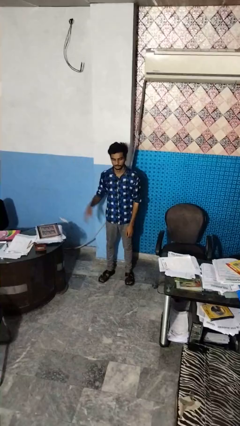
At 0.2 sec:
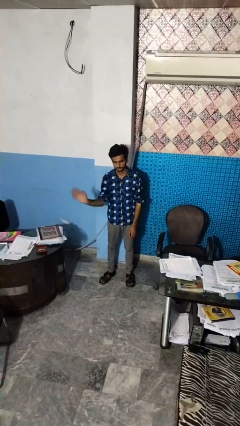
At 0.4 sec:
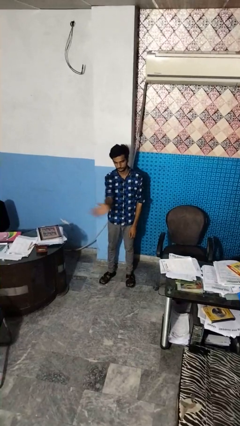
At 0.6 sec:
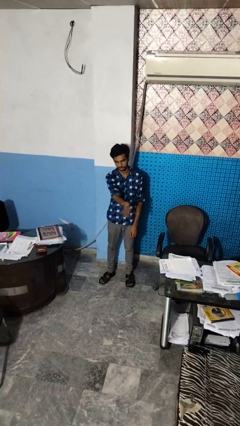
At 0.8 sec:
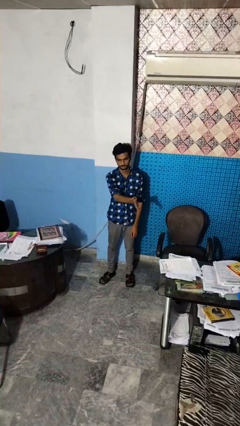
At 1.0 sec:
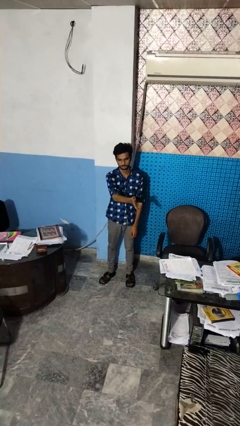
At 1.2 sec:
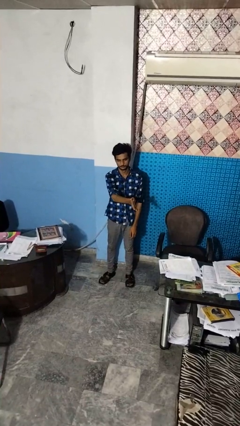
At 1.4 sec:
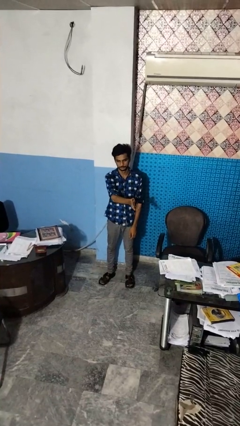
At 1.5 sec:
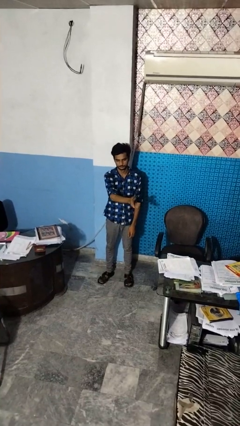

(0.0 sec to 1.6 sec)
person gestures swipe left

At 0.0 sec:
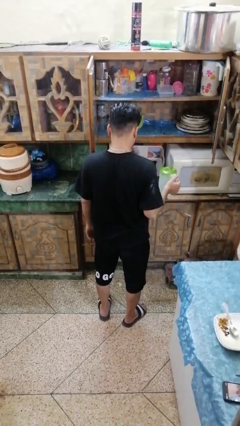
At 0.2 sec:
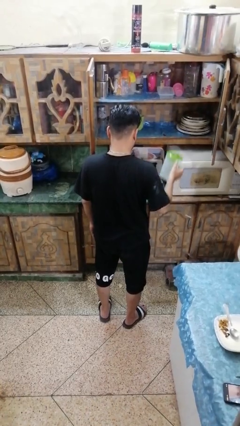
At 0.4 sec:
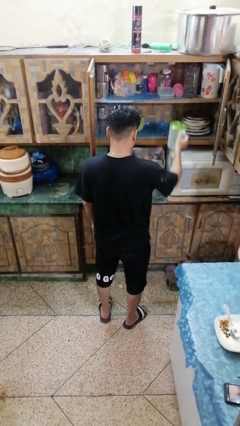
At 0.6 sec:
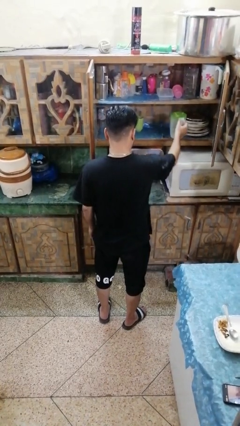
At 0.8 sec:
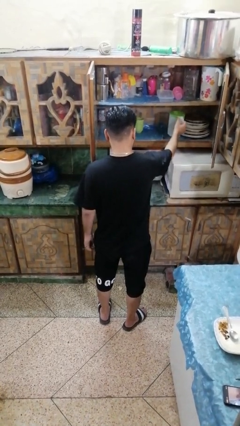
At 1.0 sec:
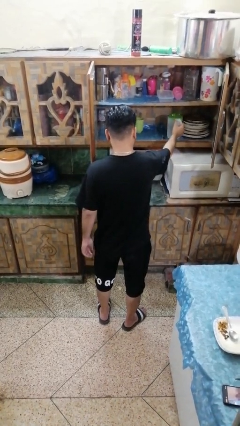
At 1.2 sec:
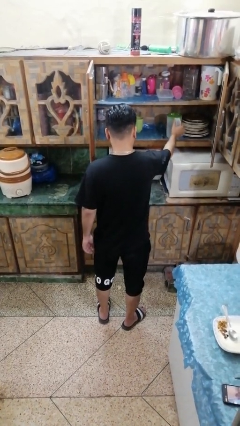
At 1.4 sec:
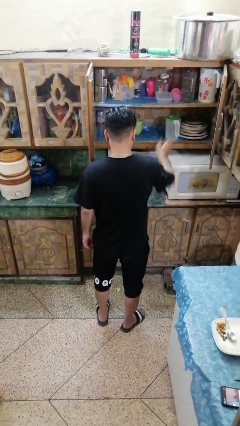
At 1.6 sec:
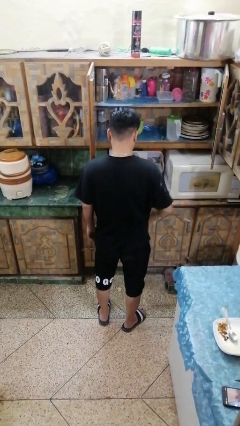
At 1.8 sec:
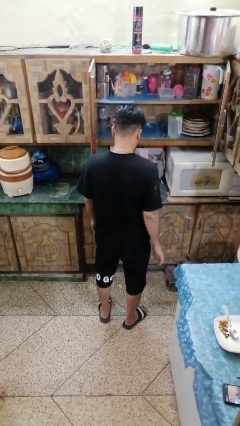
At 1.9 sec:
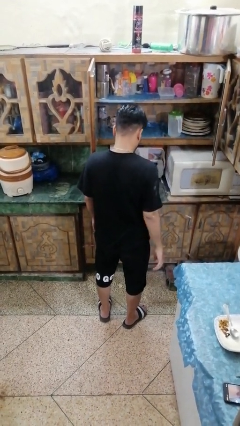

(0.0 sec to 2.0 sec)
person puts down object into cabinet

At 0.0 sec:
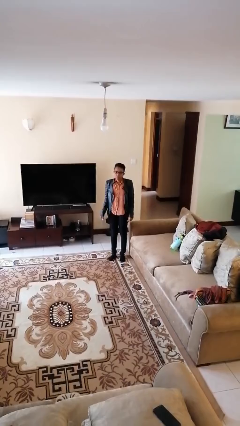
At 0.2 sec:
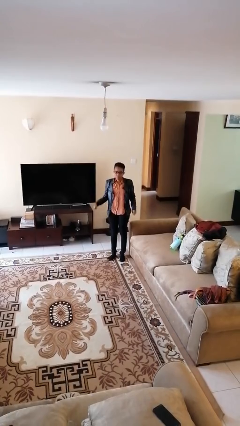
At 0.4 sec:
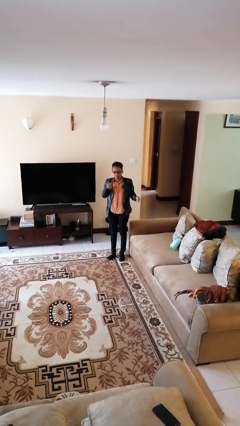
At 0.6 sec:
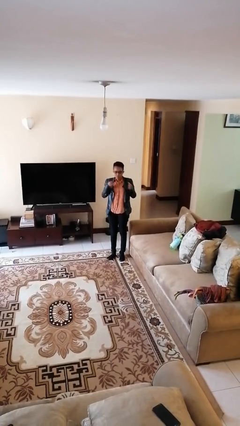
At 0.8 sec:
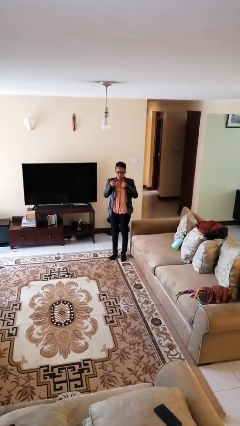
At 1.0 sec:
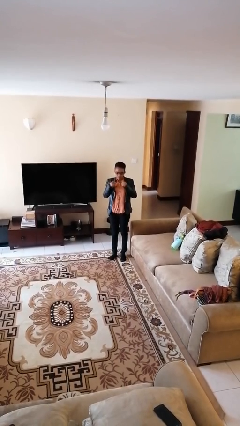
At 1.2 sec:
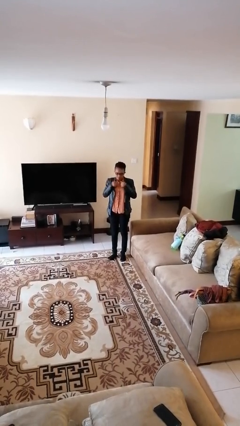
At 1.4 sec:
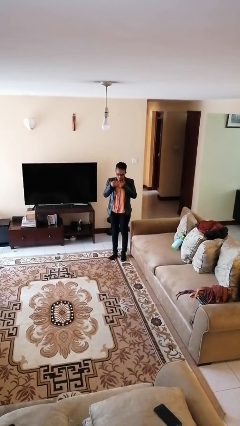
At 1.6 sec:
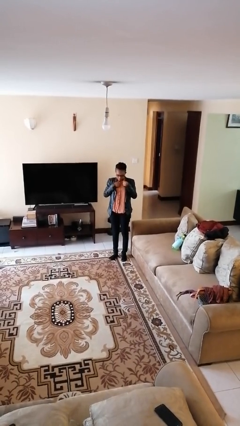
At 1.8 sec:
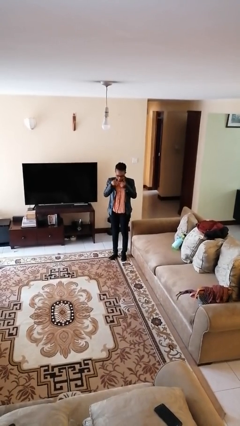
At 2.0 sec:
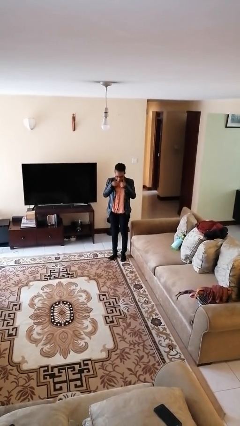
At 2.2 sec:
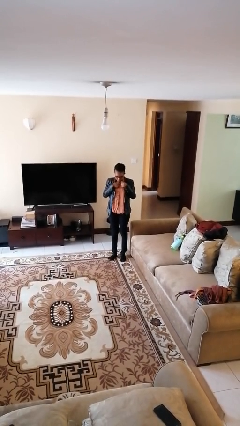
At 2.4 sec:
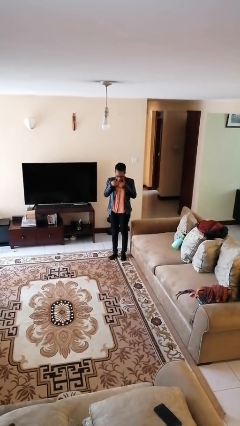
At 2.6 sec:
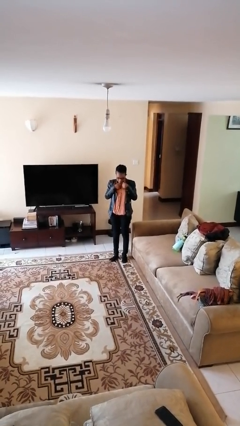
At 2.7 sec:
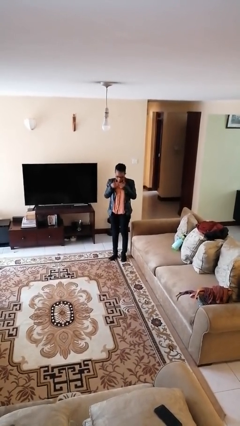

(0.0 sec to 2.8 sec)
person drums on chest

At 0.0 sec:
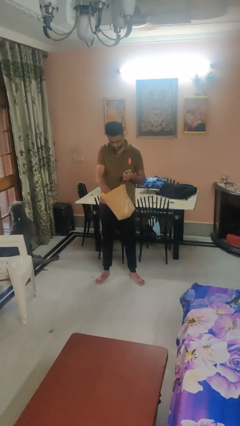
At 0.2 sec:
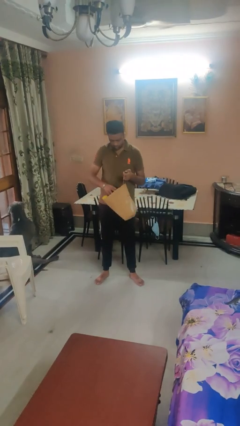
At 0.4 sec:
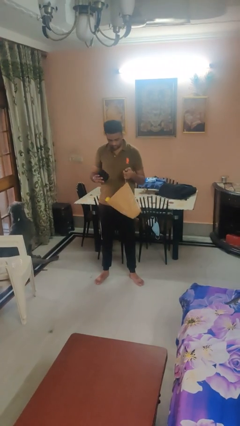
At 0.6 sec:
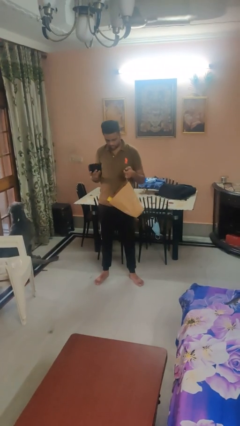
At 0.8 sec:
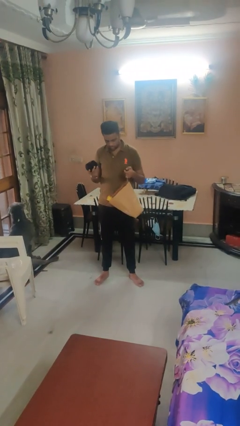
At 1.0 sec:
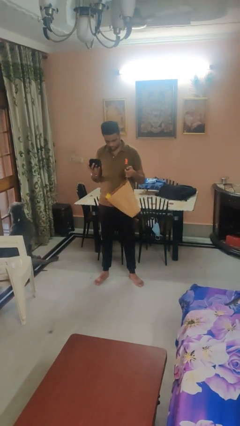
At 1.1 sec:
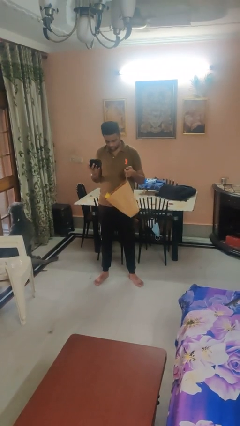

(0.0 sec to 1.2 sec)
person takes object from bag

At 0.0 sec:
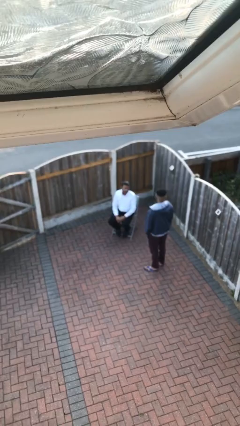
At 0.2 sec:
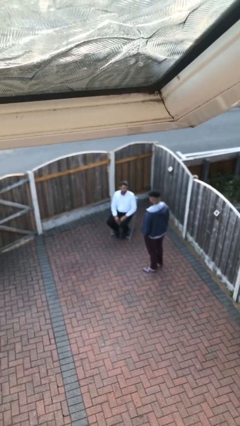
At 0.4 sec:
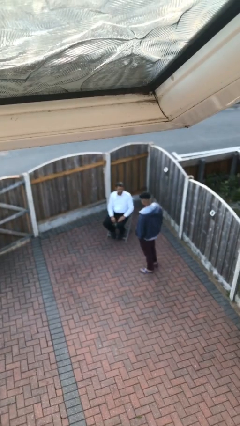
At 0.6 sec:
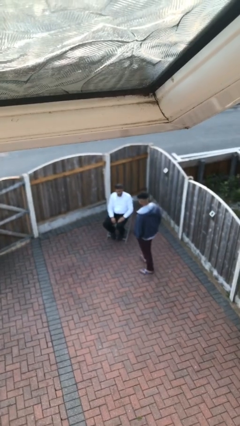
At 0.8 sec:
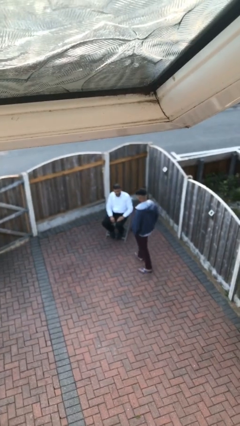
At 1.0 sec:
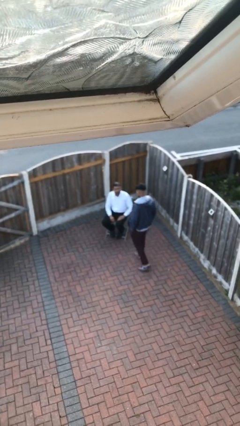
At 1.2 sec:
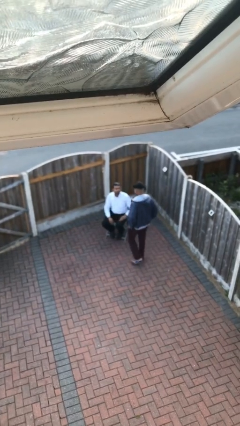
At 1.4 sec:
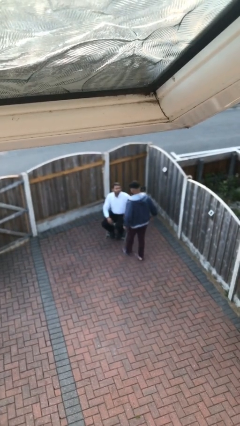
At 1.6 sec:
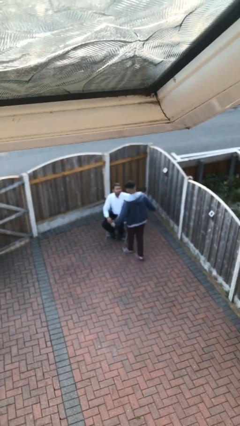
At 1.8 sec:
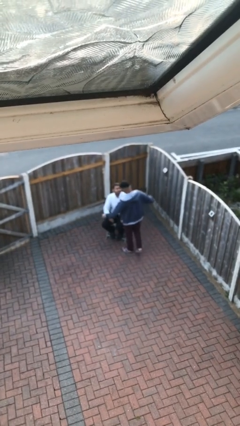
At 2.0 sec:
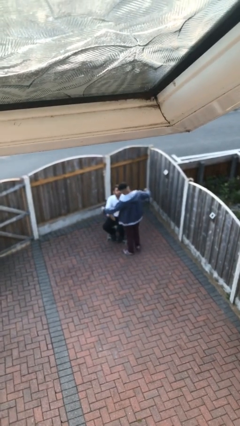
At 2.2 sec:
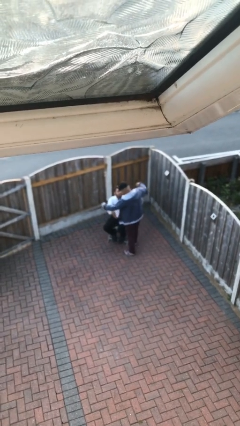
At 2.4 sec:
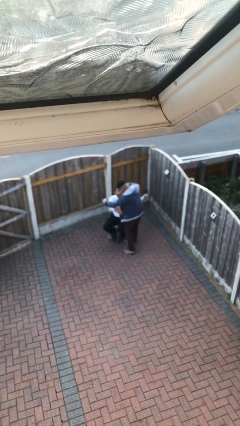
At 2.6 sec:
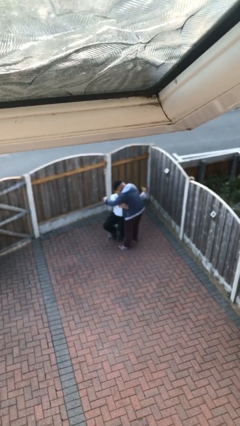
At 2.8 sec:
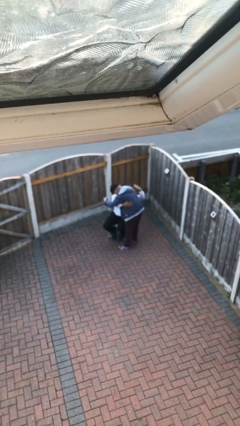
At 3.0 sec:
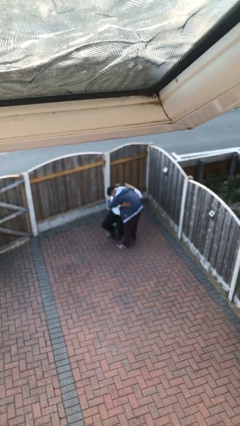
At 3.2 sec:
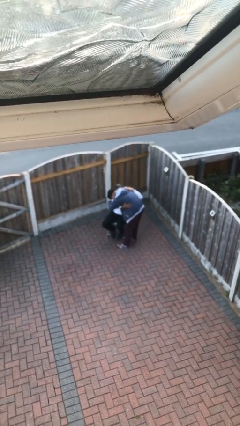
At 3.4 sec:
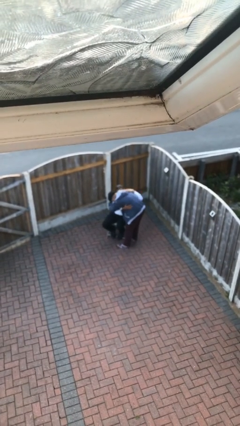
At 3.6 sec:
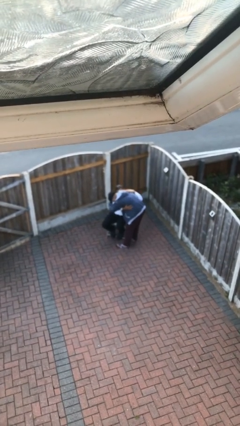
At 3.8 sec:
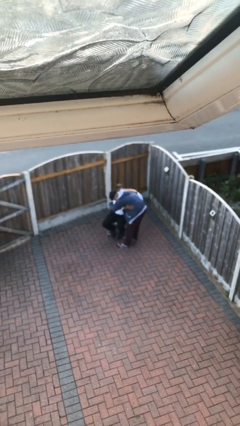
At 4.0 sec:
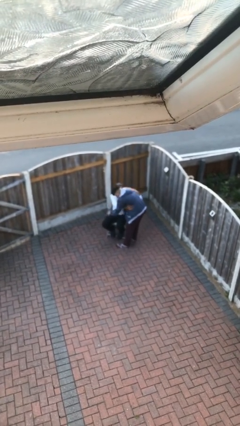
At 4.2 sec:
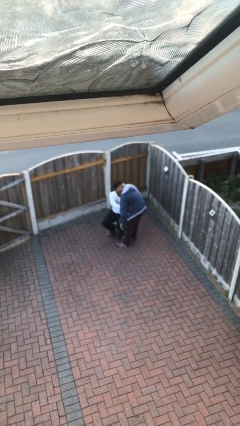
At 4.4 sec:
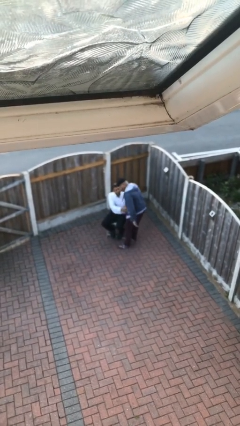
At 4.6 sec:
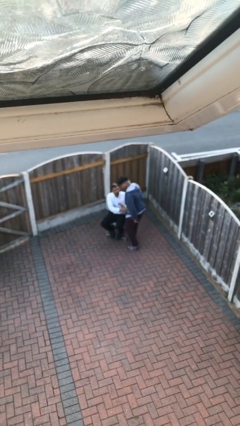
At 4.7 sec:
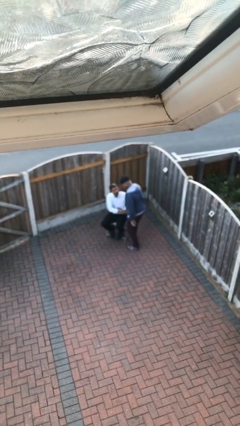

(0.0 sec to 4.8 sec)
person embraces person

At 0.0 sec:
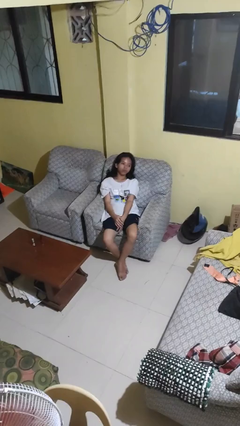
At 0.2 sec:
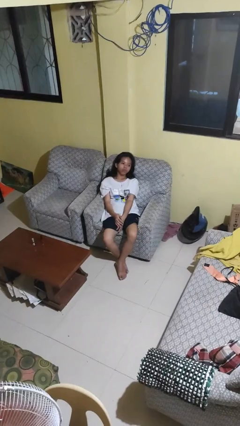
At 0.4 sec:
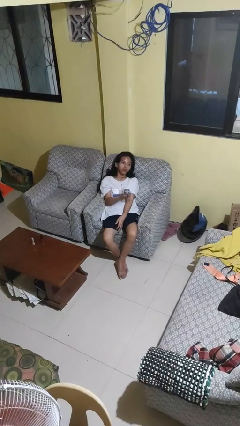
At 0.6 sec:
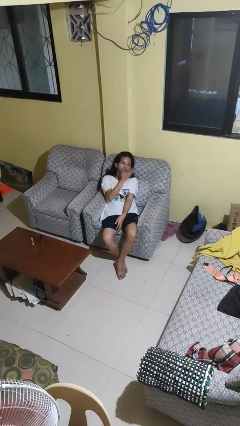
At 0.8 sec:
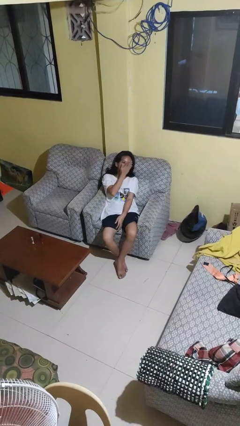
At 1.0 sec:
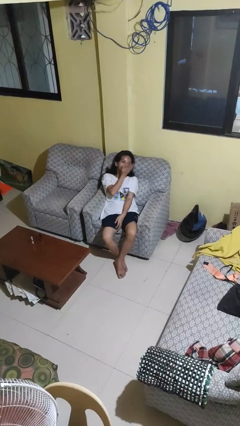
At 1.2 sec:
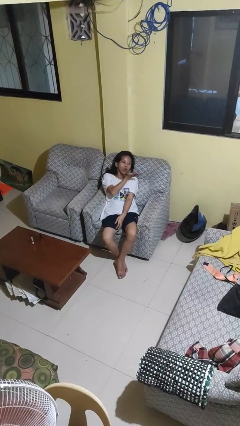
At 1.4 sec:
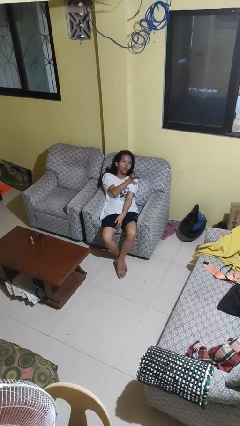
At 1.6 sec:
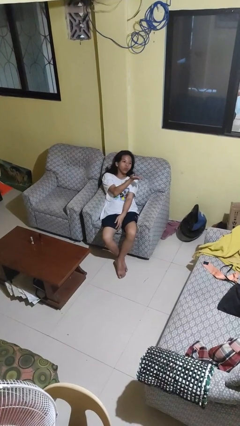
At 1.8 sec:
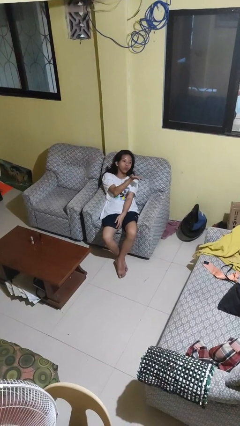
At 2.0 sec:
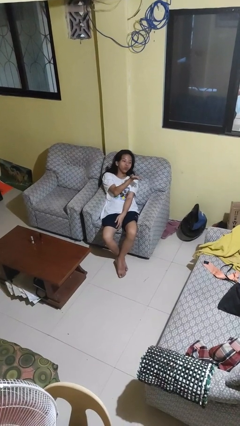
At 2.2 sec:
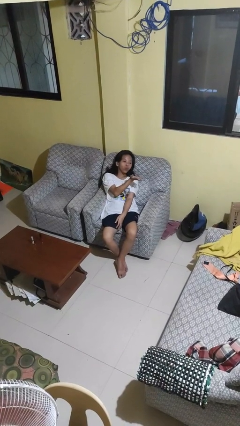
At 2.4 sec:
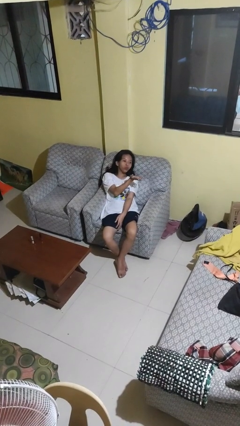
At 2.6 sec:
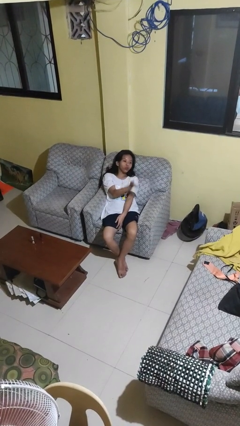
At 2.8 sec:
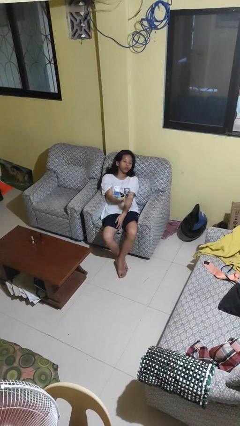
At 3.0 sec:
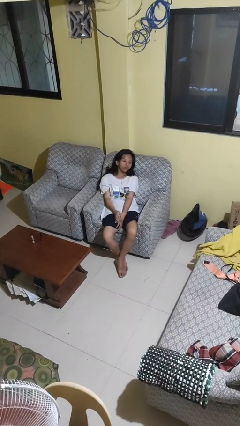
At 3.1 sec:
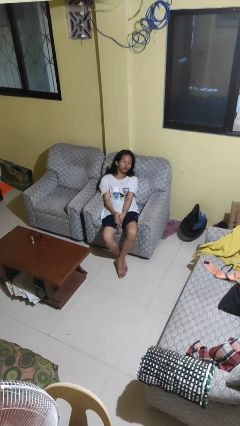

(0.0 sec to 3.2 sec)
person gestures blow kiss

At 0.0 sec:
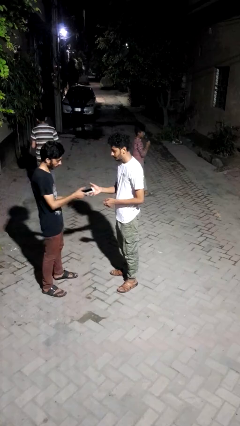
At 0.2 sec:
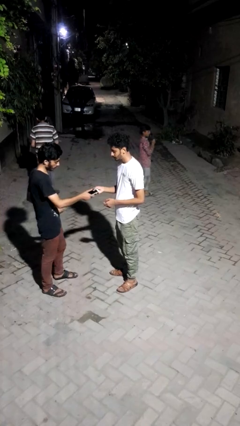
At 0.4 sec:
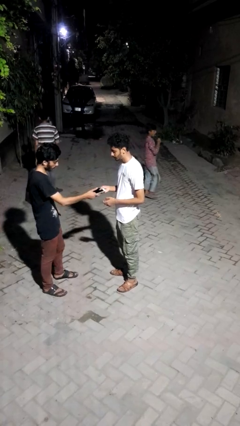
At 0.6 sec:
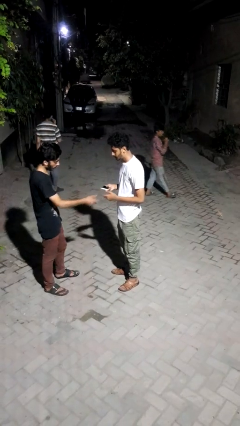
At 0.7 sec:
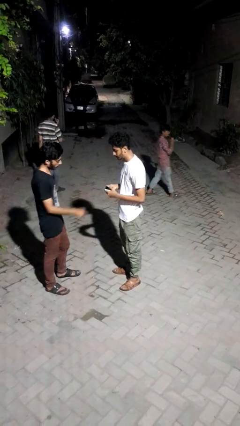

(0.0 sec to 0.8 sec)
person transfers object to person

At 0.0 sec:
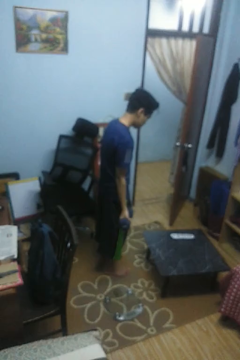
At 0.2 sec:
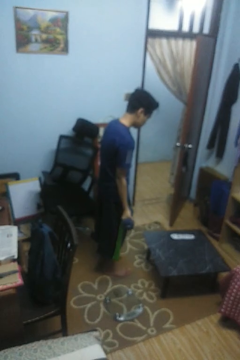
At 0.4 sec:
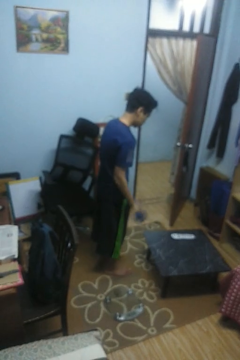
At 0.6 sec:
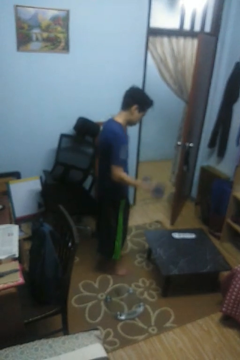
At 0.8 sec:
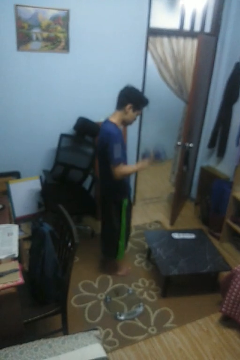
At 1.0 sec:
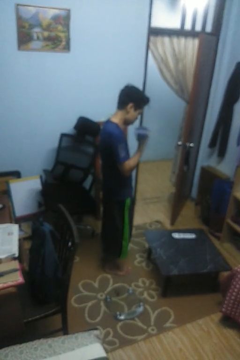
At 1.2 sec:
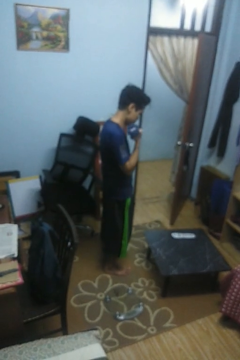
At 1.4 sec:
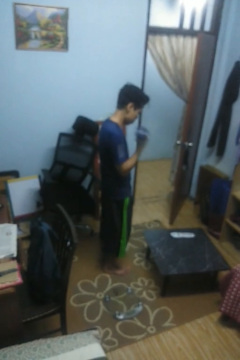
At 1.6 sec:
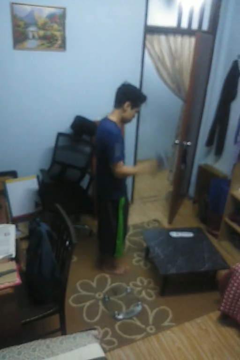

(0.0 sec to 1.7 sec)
person lifts dumbbells
